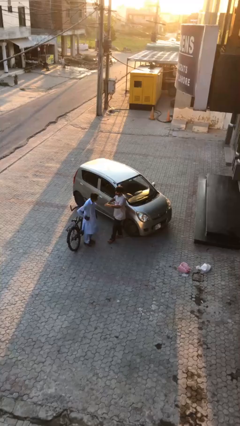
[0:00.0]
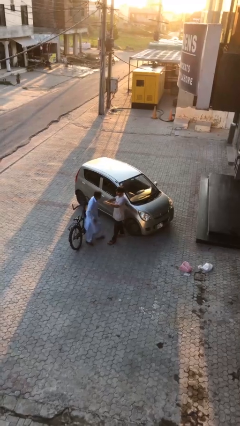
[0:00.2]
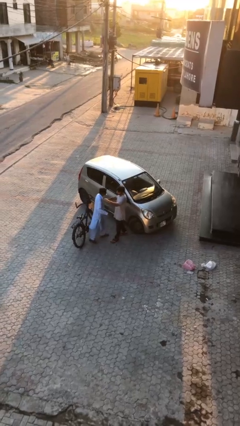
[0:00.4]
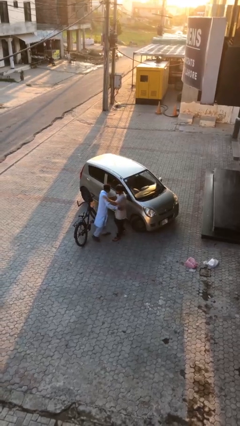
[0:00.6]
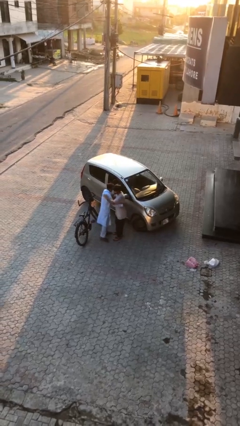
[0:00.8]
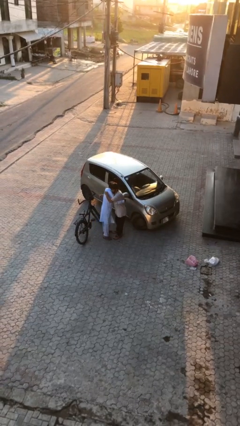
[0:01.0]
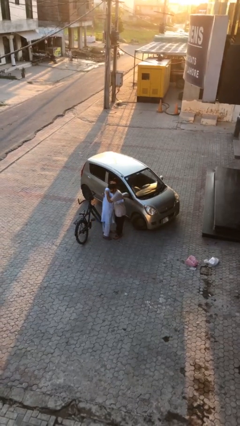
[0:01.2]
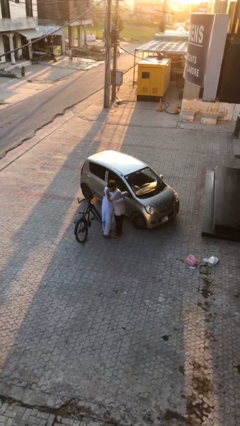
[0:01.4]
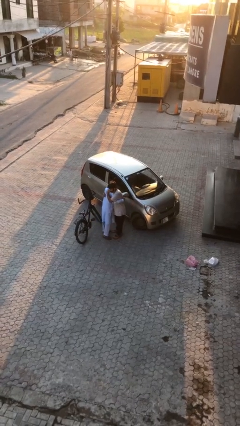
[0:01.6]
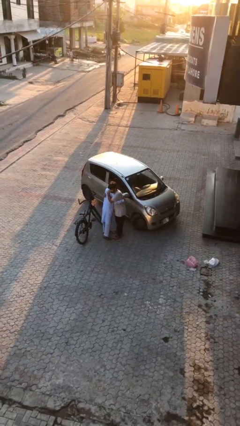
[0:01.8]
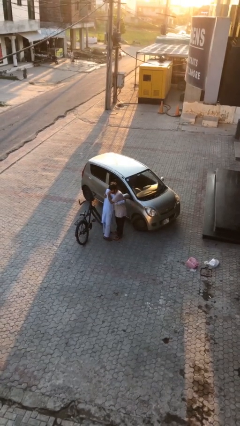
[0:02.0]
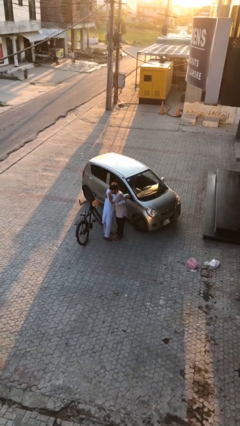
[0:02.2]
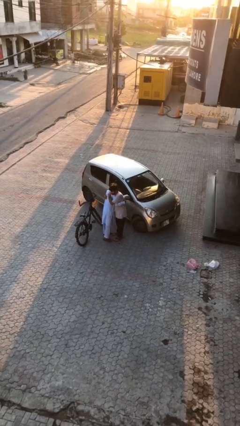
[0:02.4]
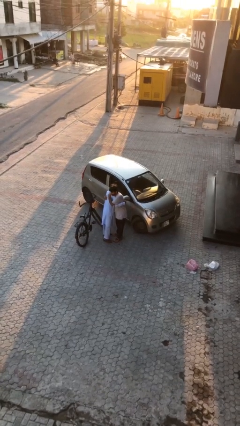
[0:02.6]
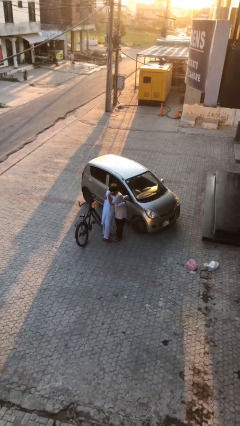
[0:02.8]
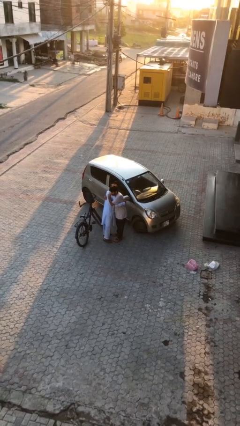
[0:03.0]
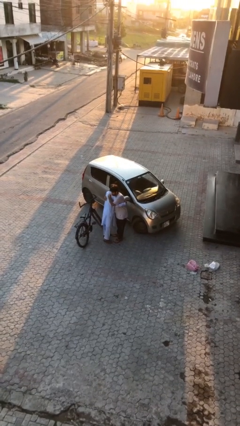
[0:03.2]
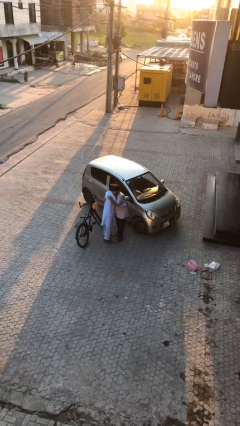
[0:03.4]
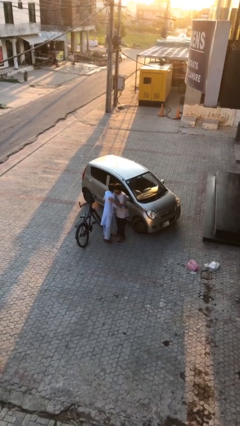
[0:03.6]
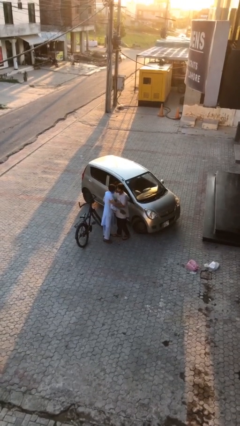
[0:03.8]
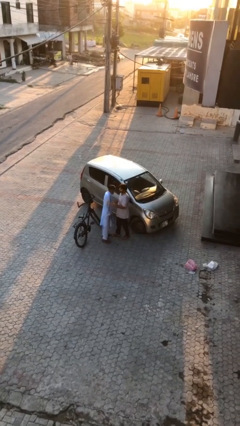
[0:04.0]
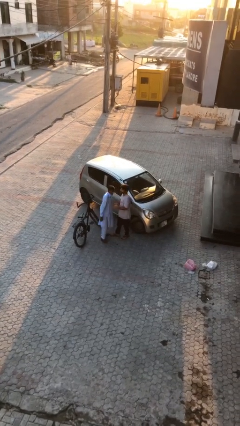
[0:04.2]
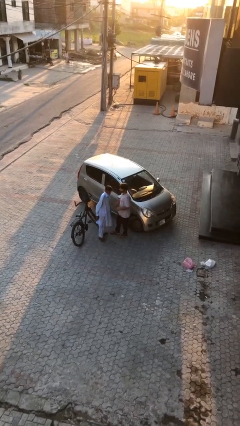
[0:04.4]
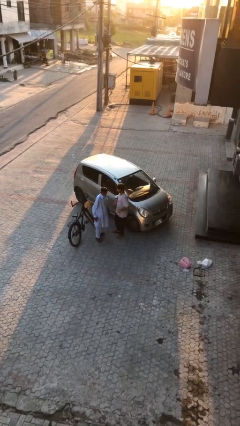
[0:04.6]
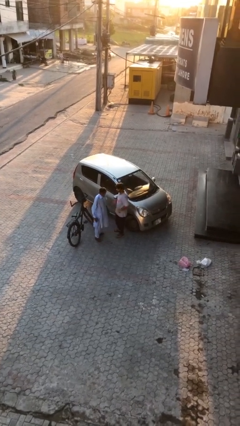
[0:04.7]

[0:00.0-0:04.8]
person embraces person

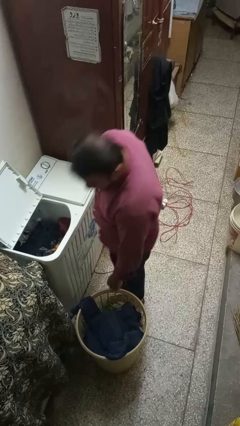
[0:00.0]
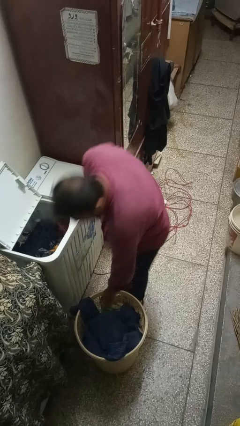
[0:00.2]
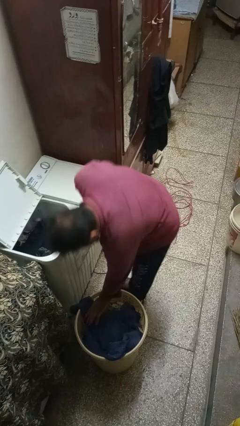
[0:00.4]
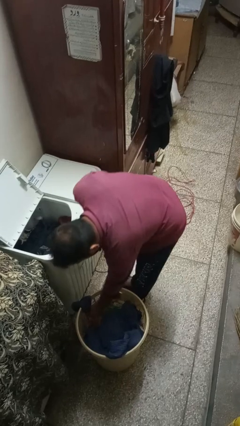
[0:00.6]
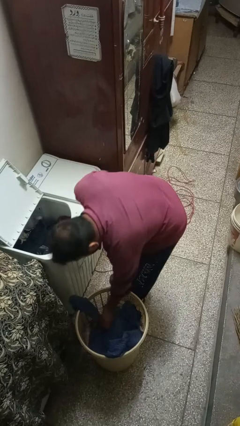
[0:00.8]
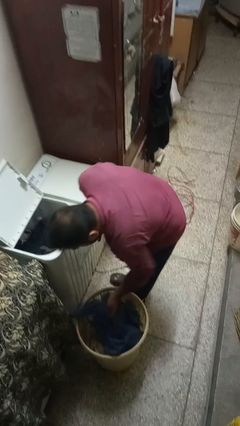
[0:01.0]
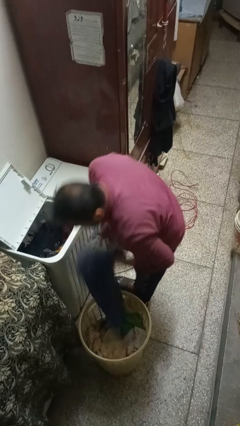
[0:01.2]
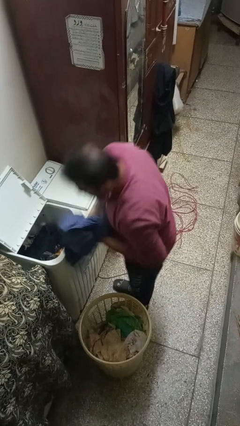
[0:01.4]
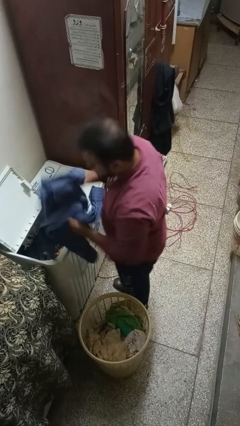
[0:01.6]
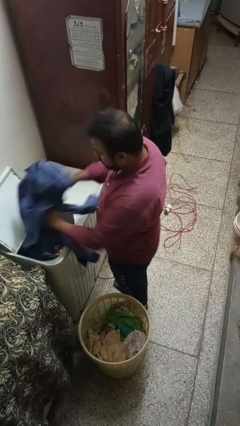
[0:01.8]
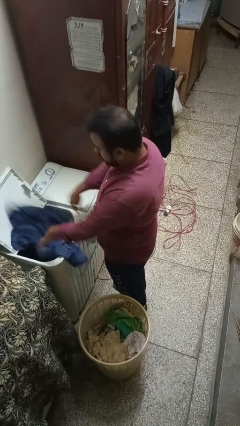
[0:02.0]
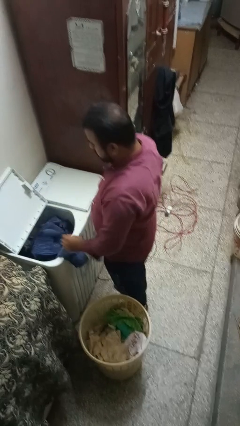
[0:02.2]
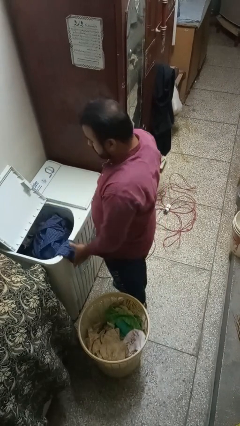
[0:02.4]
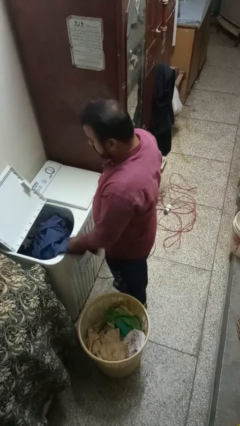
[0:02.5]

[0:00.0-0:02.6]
person loads clotheswasher

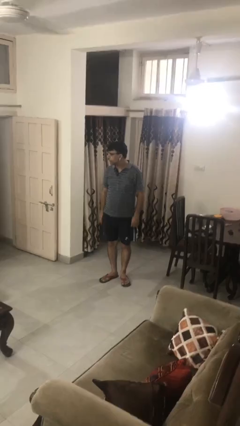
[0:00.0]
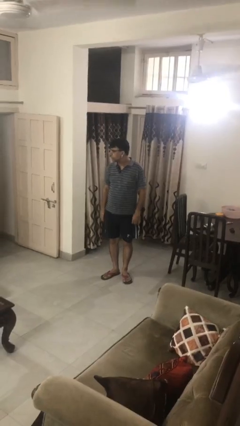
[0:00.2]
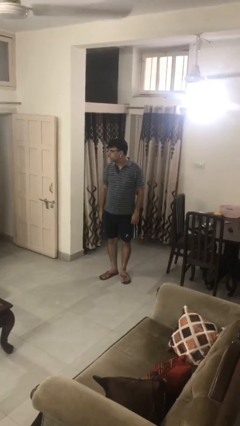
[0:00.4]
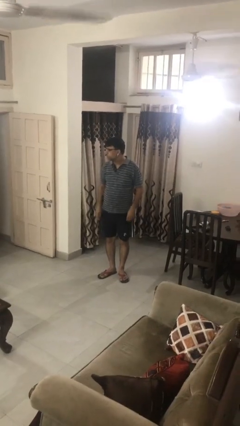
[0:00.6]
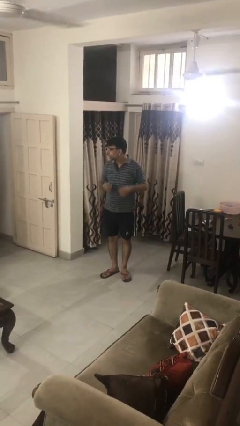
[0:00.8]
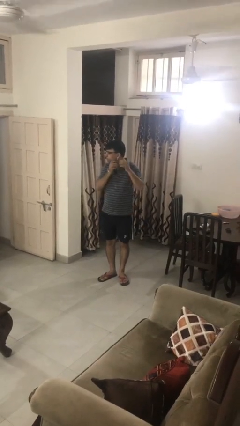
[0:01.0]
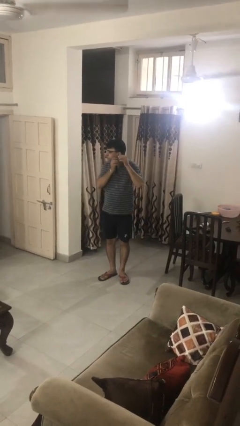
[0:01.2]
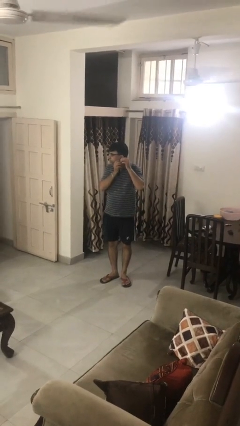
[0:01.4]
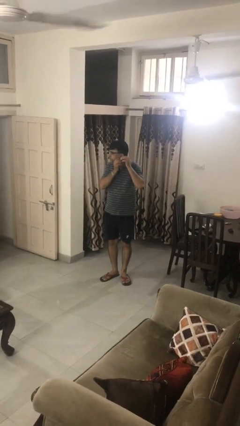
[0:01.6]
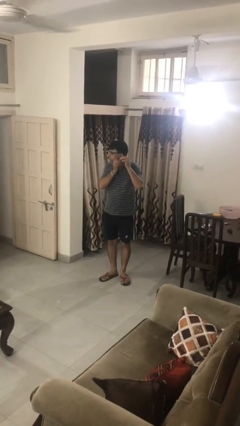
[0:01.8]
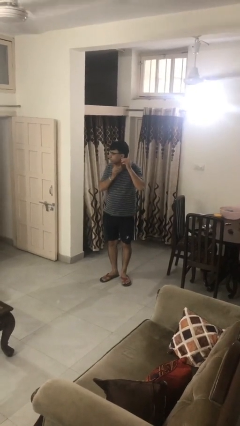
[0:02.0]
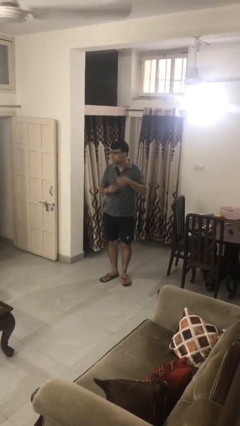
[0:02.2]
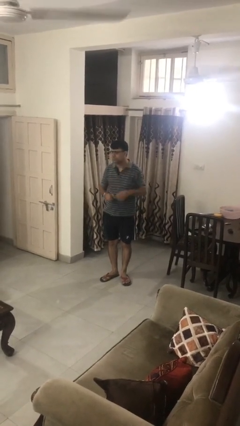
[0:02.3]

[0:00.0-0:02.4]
person takes off earrings

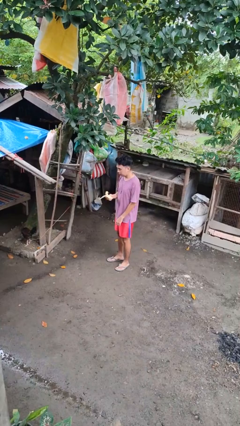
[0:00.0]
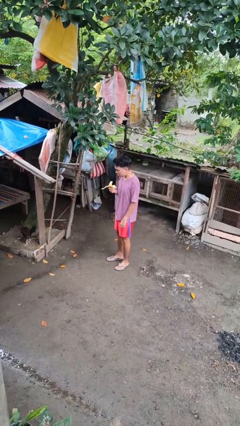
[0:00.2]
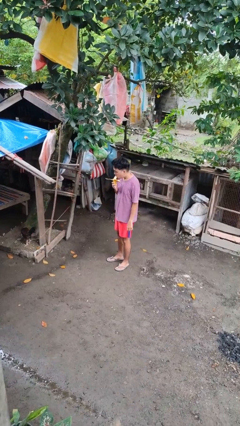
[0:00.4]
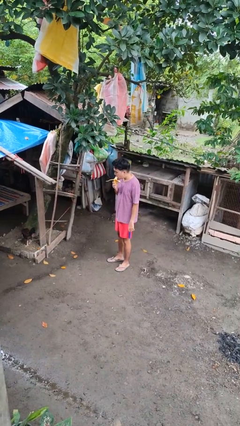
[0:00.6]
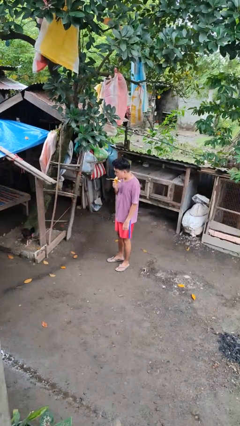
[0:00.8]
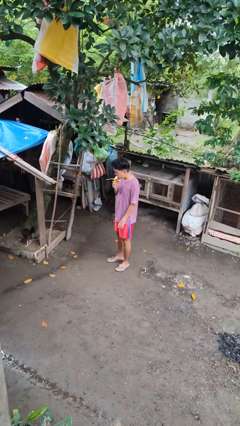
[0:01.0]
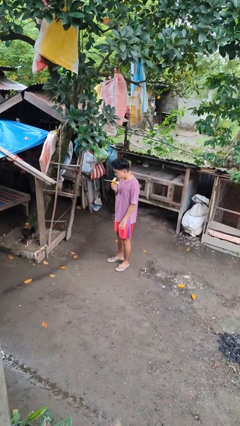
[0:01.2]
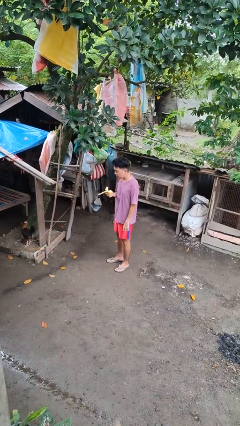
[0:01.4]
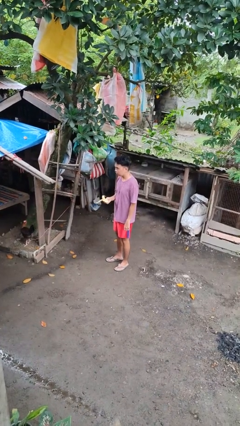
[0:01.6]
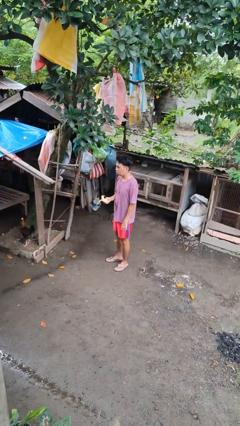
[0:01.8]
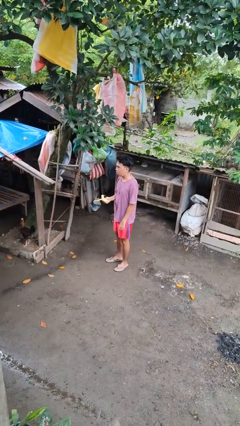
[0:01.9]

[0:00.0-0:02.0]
person eats banana

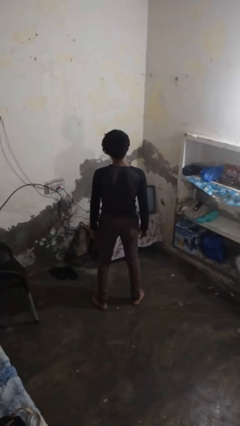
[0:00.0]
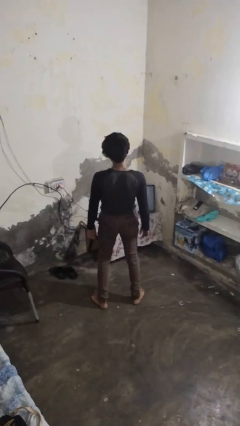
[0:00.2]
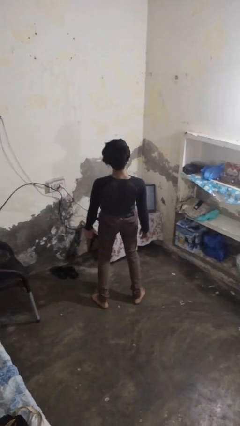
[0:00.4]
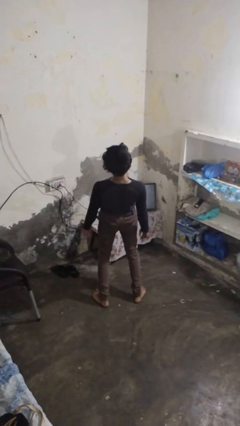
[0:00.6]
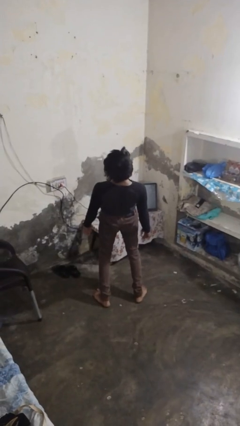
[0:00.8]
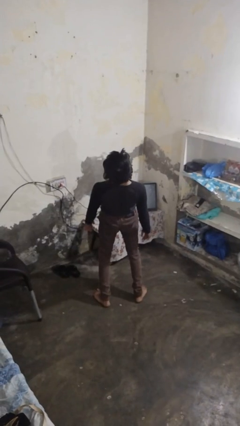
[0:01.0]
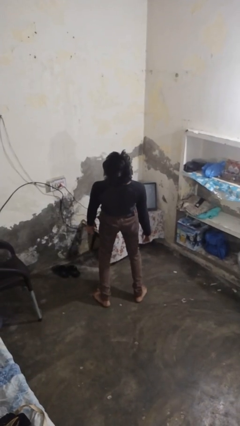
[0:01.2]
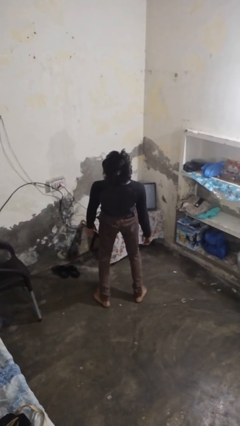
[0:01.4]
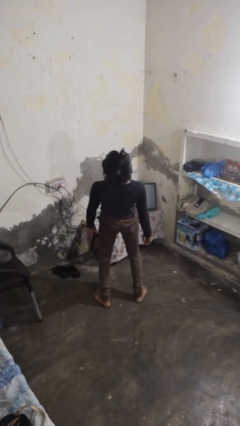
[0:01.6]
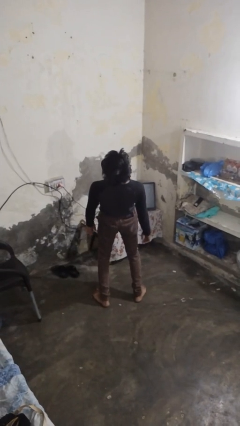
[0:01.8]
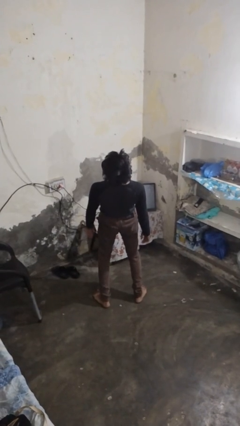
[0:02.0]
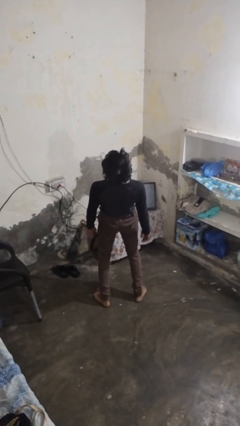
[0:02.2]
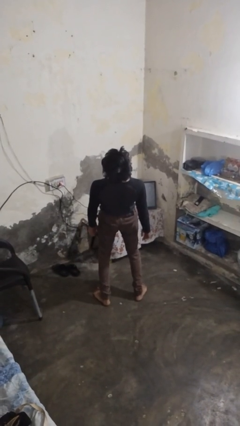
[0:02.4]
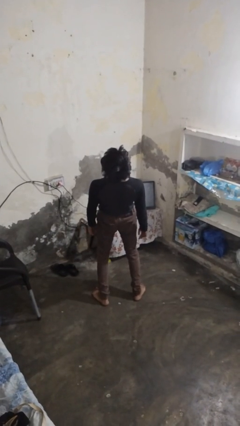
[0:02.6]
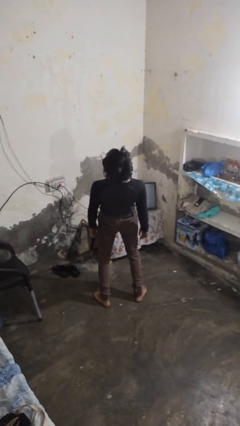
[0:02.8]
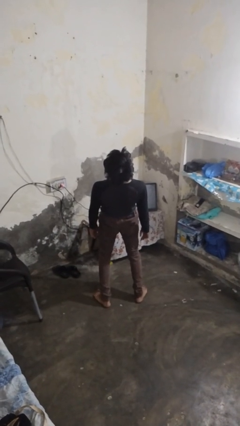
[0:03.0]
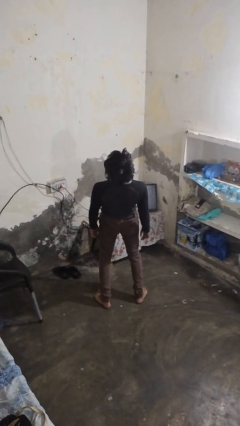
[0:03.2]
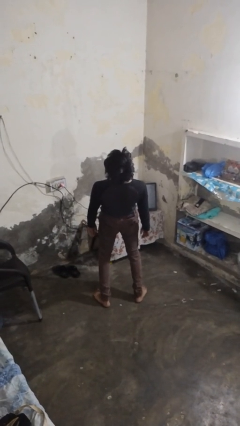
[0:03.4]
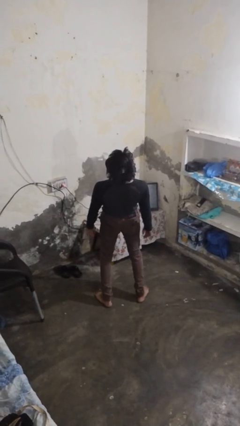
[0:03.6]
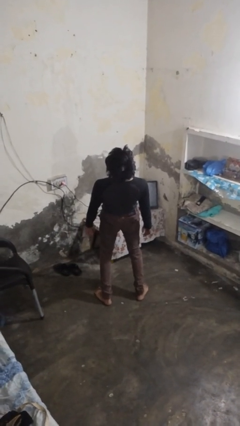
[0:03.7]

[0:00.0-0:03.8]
person stretches back

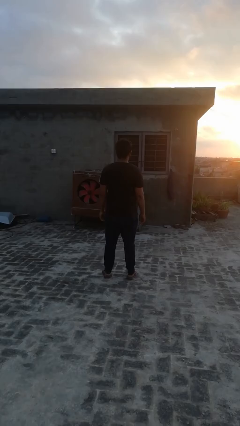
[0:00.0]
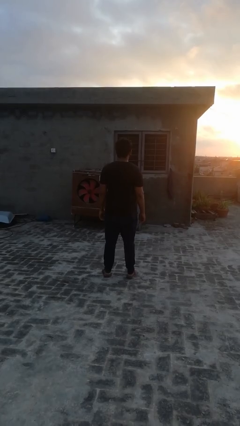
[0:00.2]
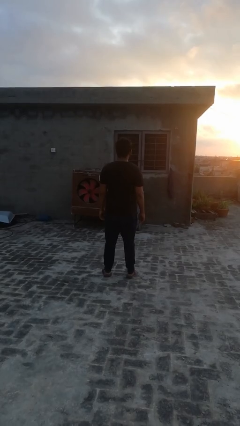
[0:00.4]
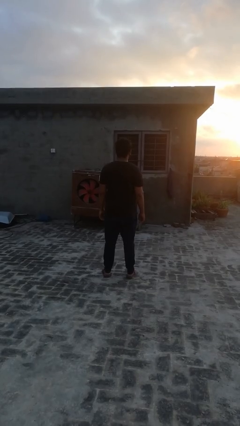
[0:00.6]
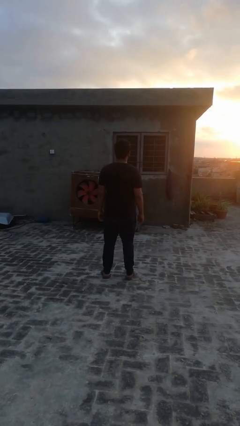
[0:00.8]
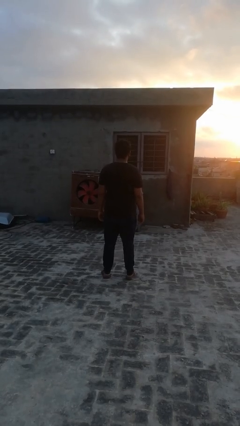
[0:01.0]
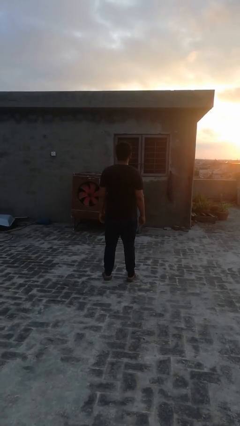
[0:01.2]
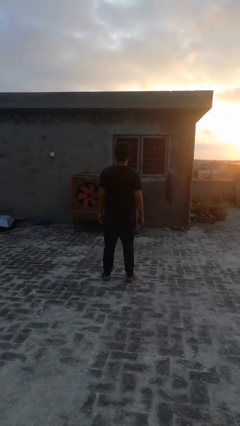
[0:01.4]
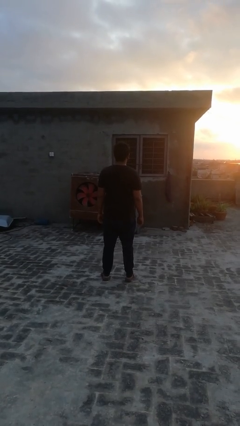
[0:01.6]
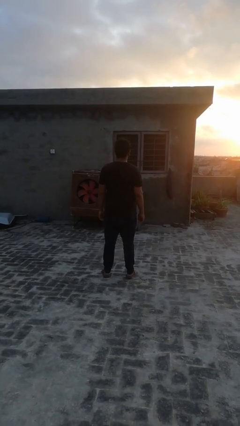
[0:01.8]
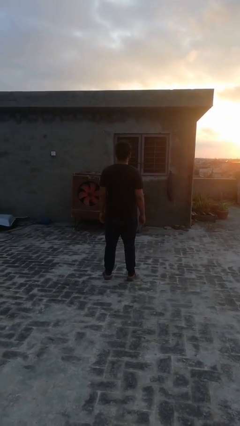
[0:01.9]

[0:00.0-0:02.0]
person gestures hang loose
